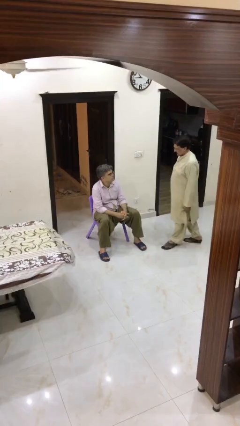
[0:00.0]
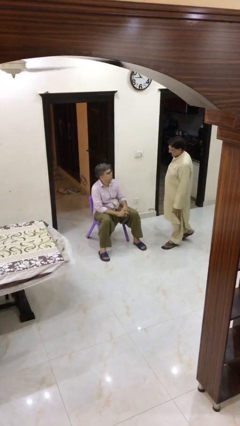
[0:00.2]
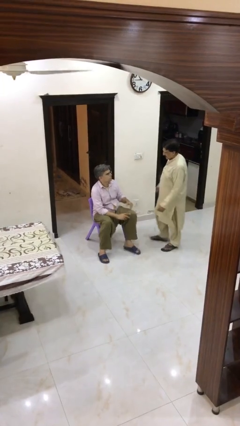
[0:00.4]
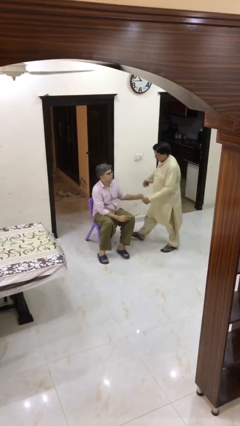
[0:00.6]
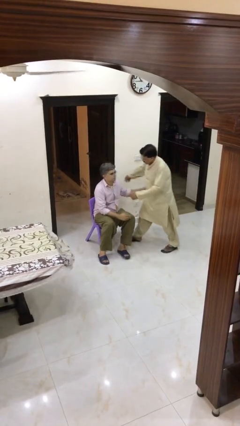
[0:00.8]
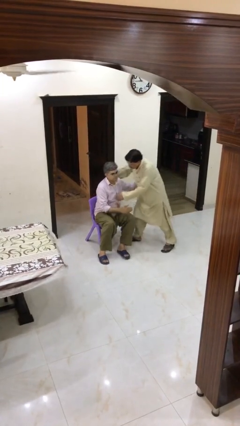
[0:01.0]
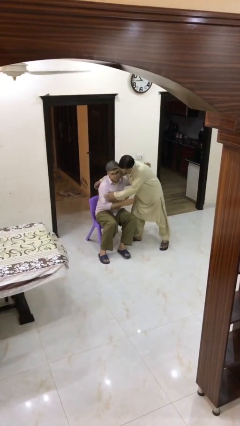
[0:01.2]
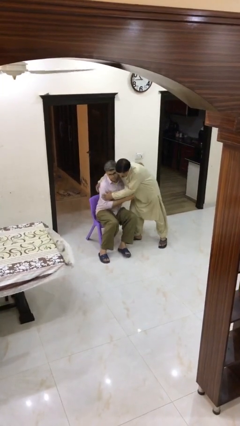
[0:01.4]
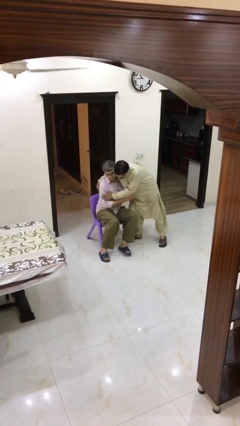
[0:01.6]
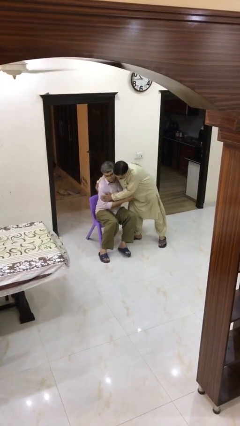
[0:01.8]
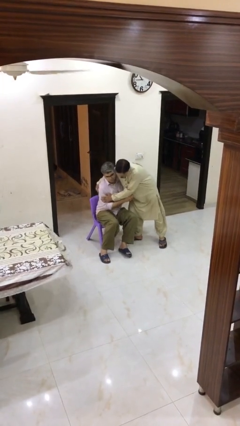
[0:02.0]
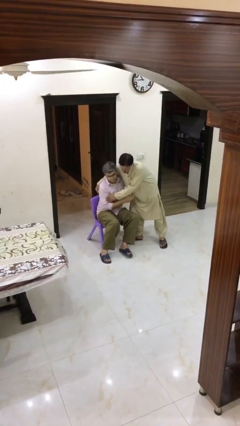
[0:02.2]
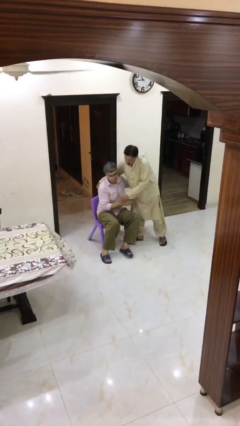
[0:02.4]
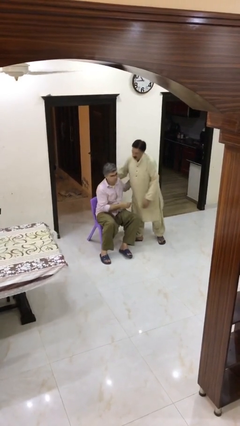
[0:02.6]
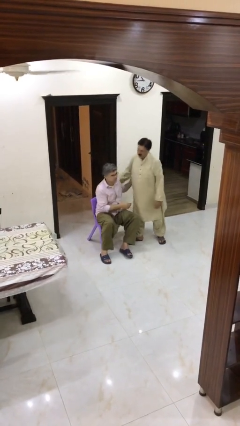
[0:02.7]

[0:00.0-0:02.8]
person embraces person

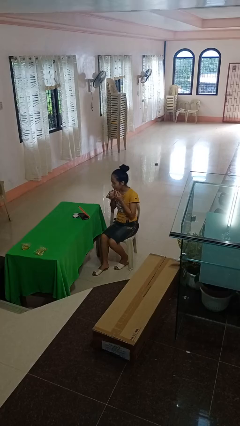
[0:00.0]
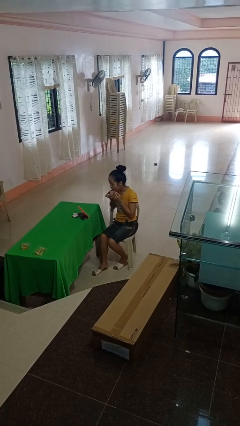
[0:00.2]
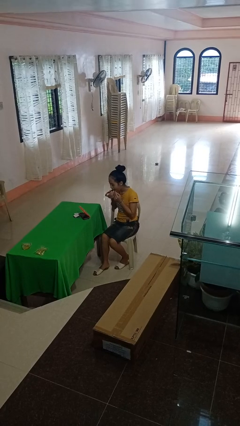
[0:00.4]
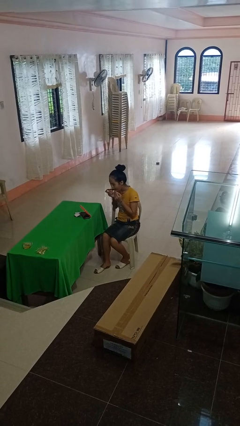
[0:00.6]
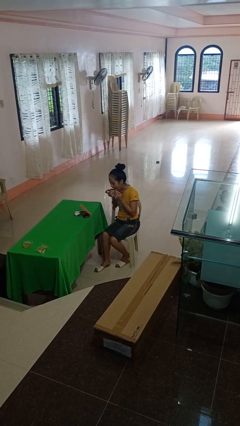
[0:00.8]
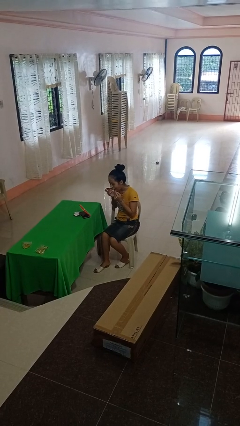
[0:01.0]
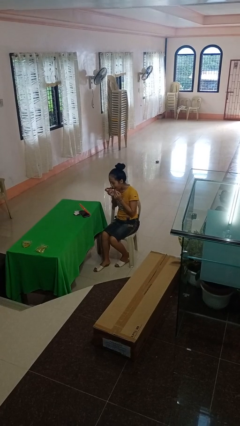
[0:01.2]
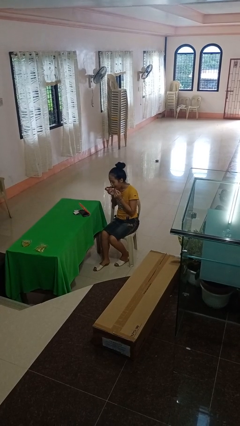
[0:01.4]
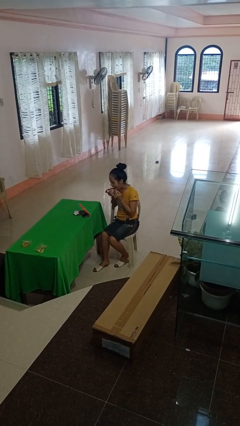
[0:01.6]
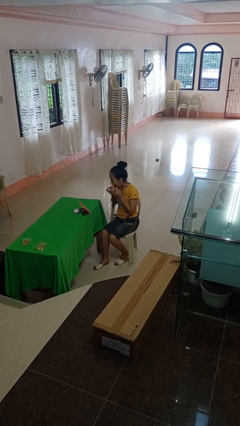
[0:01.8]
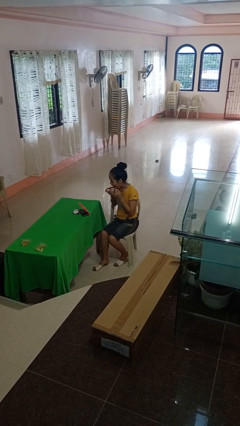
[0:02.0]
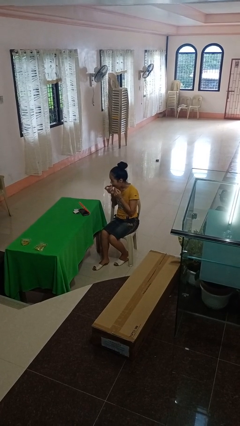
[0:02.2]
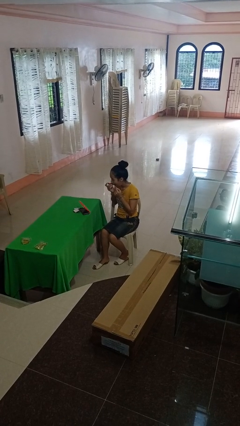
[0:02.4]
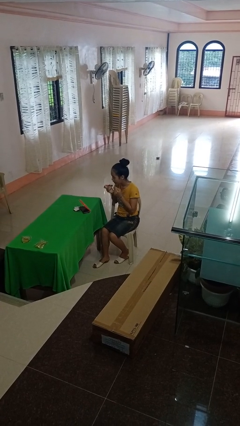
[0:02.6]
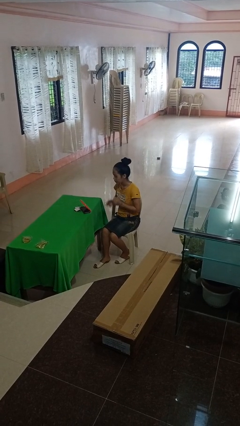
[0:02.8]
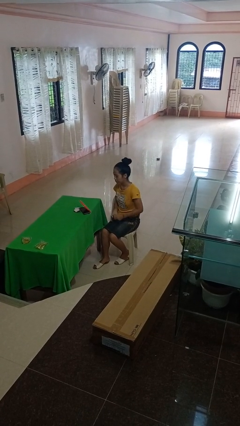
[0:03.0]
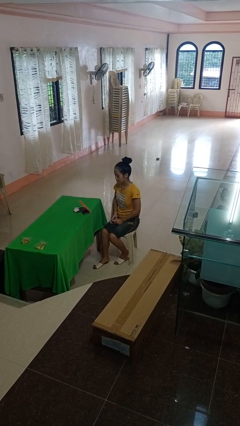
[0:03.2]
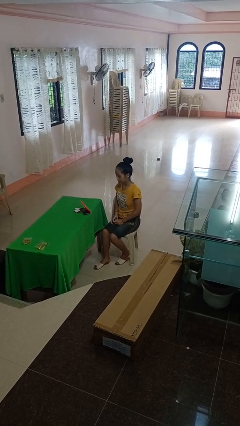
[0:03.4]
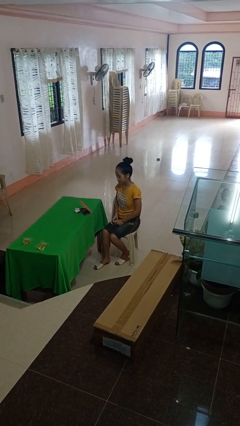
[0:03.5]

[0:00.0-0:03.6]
person applies lip makeup

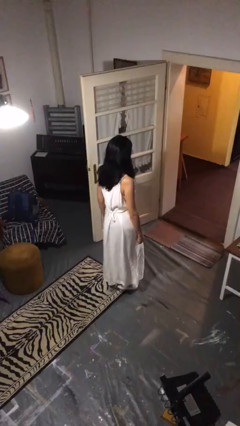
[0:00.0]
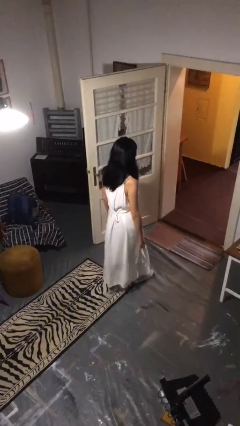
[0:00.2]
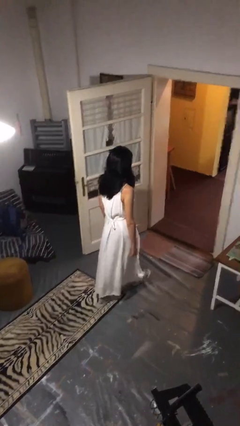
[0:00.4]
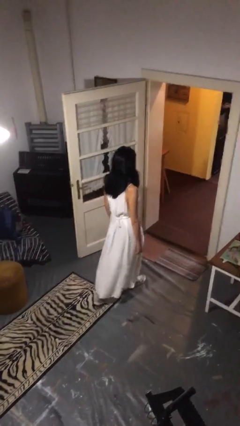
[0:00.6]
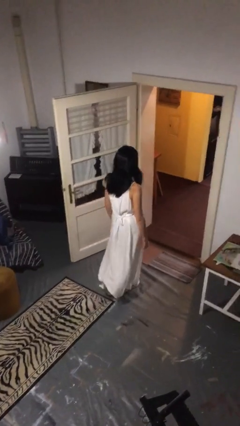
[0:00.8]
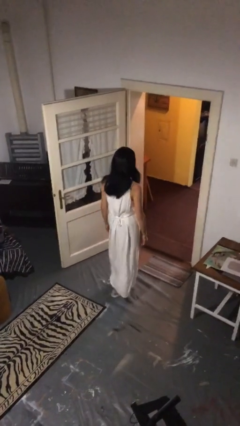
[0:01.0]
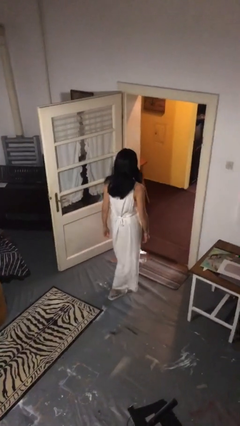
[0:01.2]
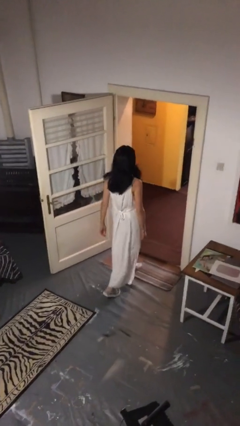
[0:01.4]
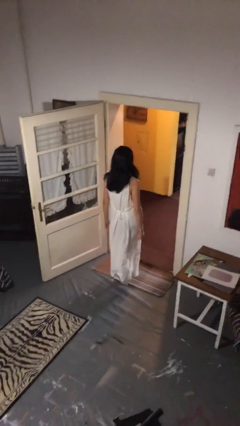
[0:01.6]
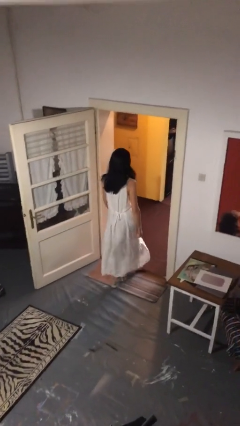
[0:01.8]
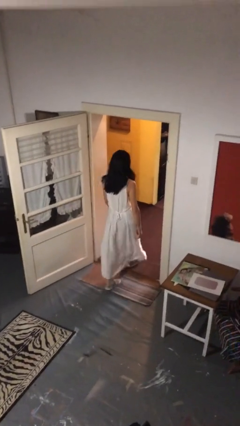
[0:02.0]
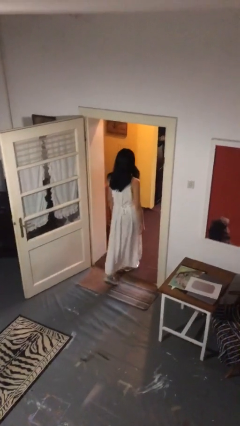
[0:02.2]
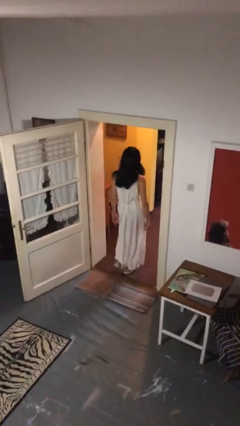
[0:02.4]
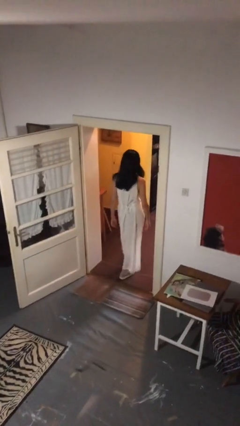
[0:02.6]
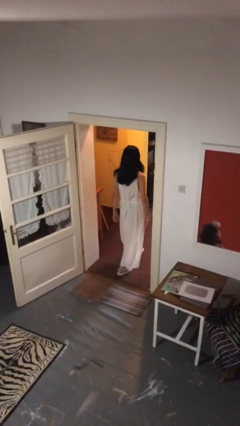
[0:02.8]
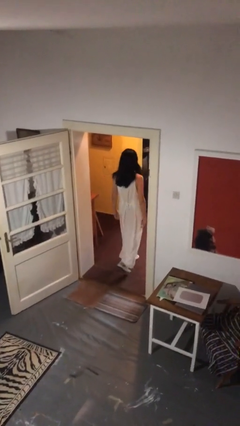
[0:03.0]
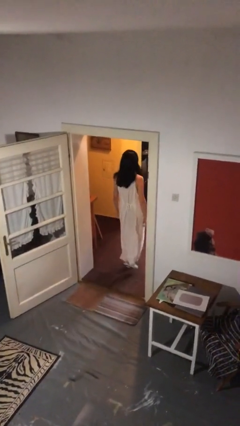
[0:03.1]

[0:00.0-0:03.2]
person exits scene through structure

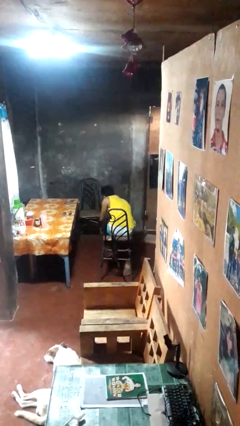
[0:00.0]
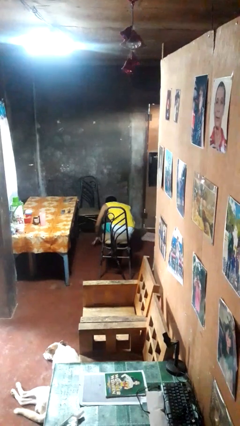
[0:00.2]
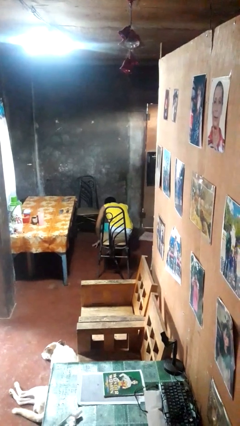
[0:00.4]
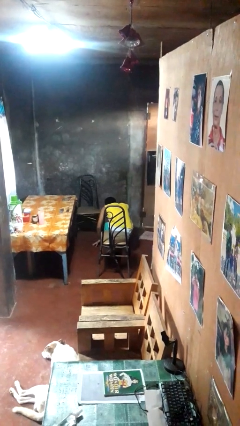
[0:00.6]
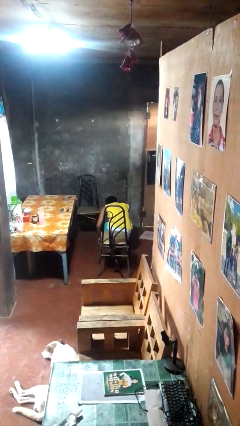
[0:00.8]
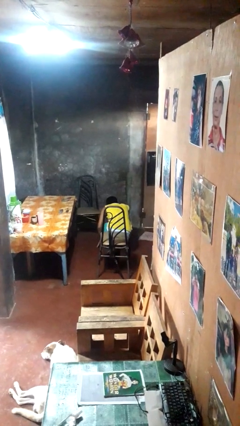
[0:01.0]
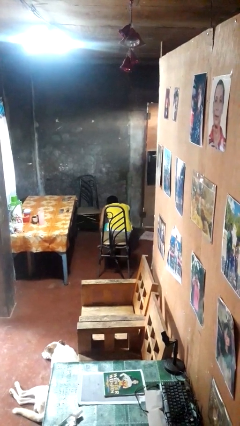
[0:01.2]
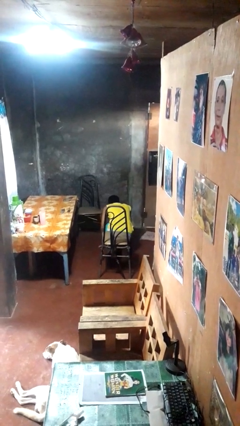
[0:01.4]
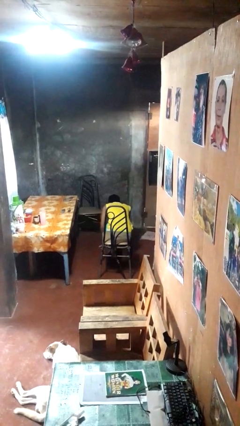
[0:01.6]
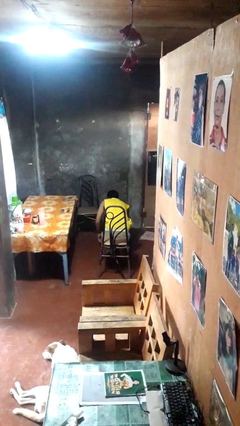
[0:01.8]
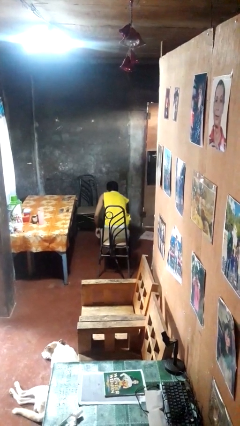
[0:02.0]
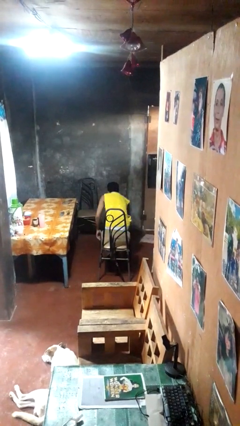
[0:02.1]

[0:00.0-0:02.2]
person falls from chair

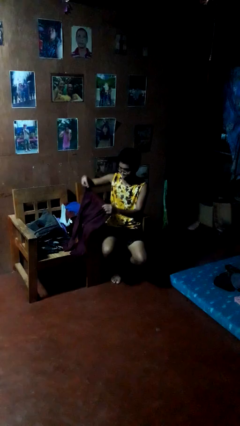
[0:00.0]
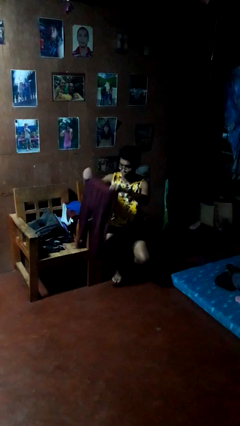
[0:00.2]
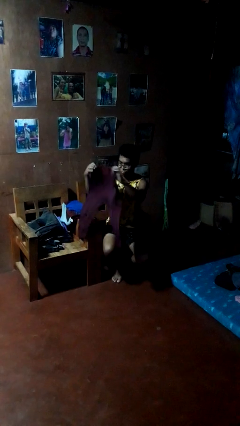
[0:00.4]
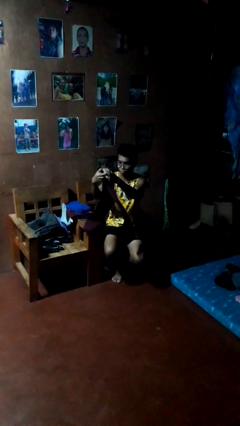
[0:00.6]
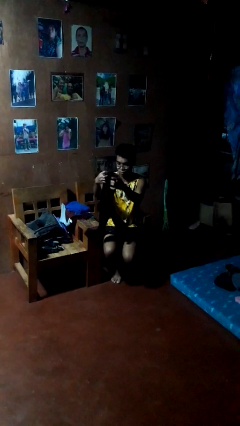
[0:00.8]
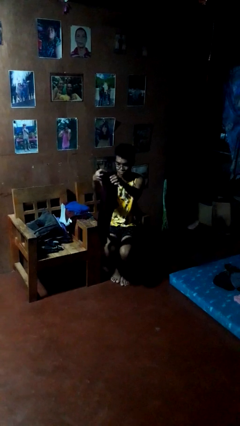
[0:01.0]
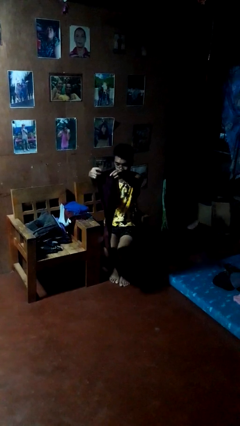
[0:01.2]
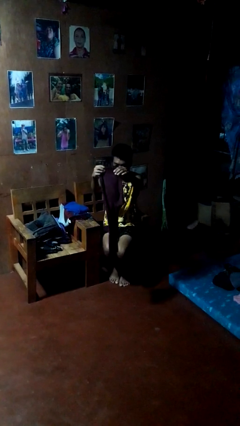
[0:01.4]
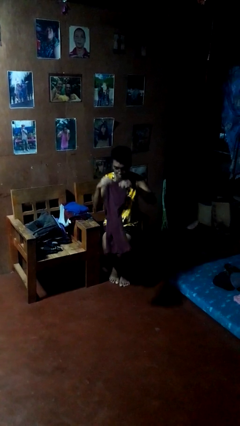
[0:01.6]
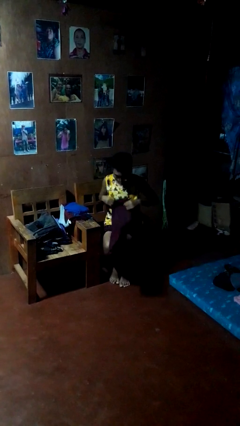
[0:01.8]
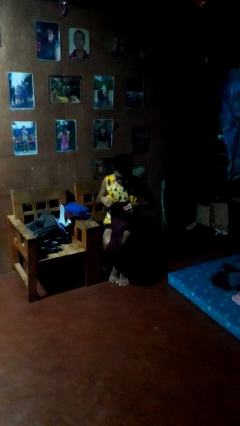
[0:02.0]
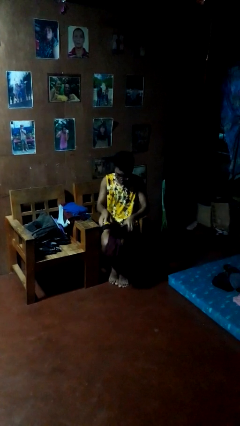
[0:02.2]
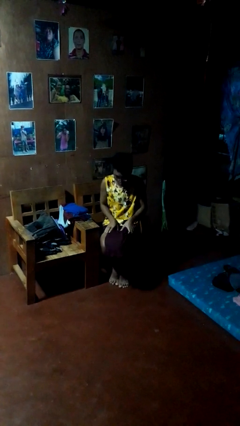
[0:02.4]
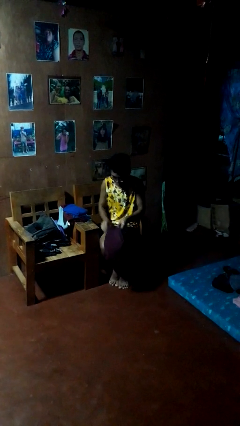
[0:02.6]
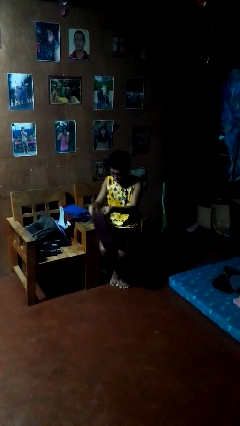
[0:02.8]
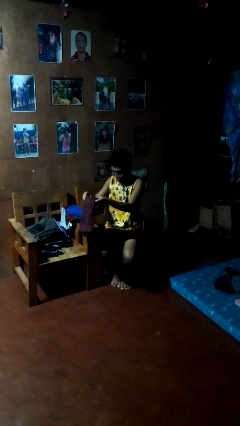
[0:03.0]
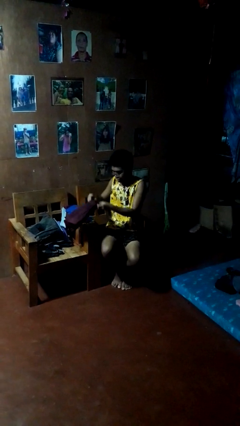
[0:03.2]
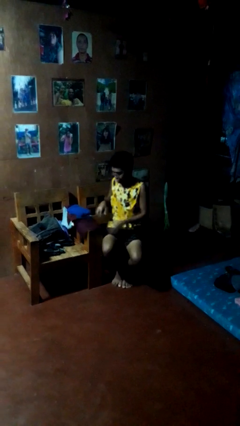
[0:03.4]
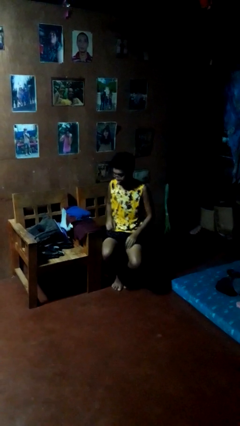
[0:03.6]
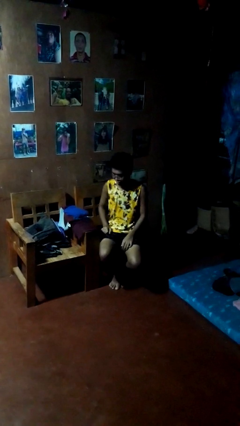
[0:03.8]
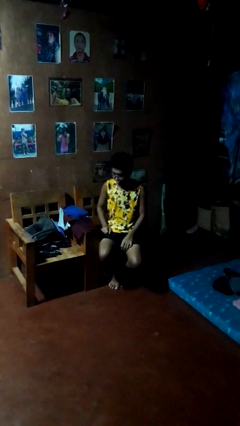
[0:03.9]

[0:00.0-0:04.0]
person folds pants

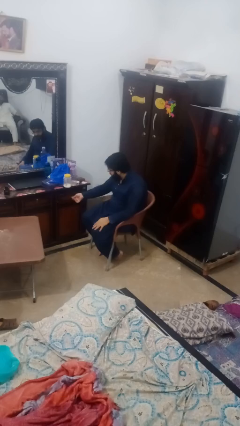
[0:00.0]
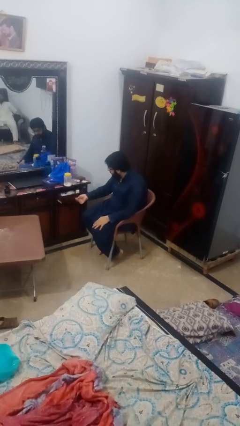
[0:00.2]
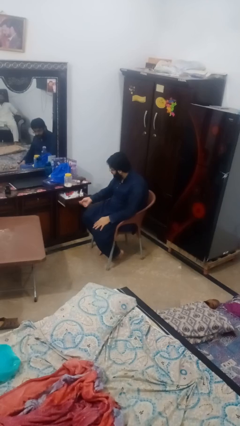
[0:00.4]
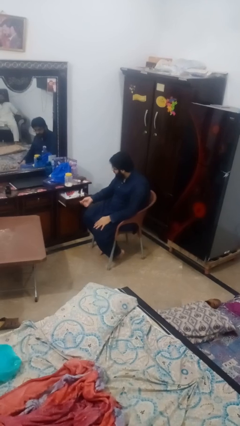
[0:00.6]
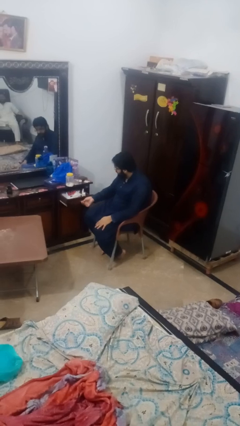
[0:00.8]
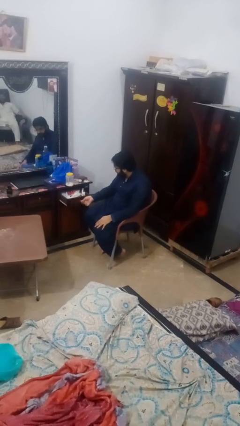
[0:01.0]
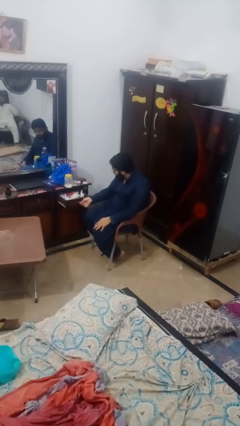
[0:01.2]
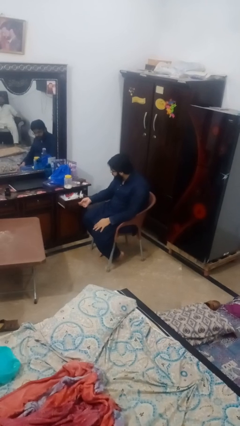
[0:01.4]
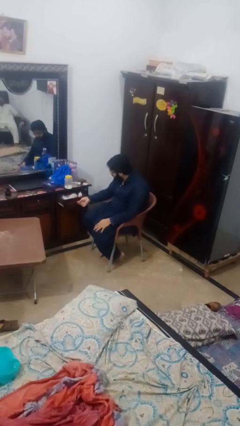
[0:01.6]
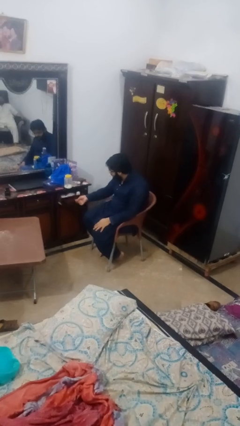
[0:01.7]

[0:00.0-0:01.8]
person opens dresser drawer
